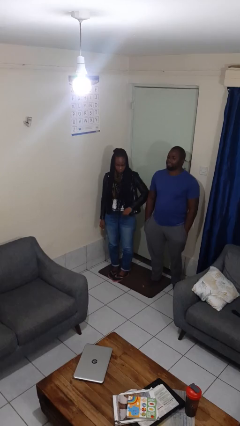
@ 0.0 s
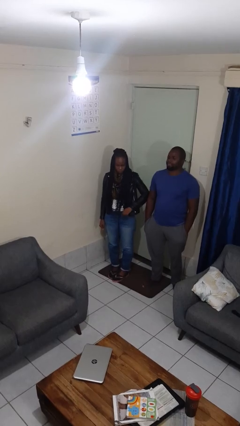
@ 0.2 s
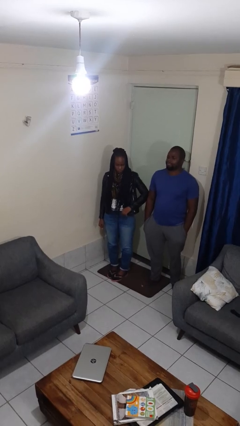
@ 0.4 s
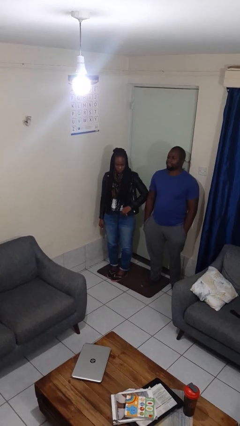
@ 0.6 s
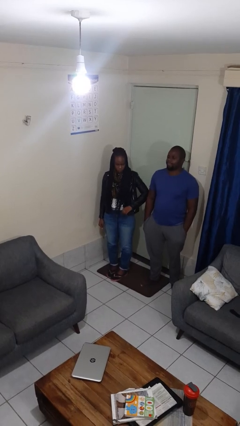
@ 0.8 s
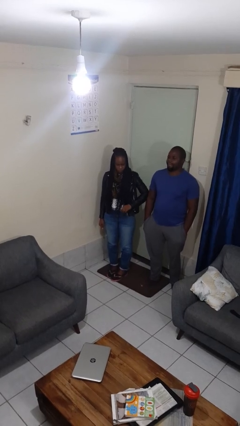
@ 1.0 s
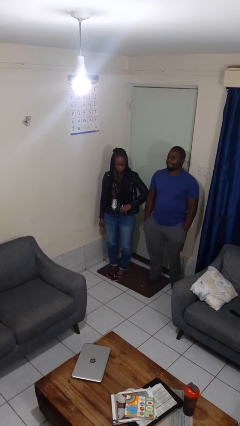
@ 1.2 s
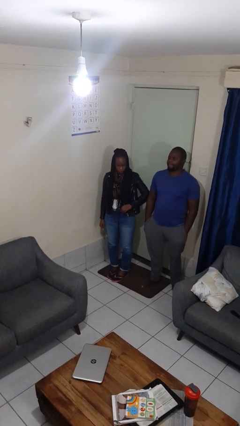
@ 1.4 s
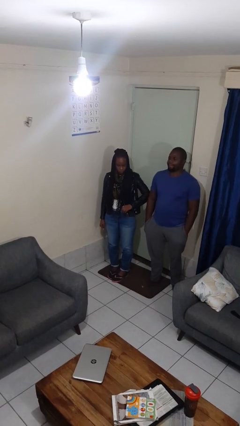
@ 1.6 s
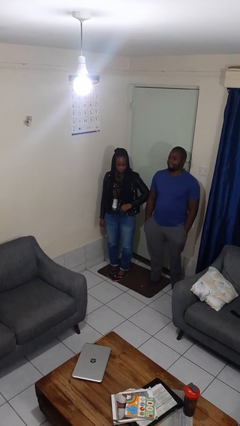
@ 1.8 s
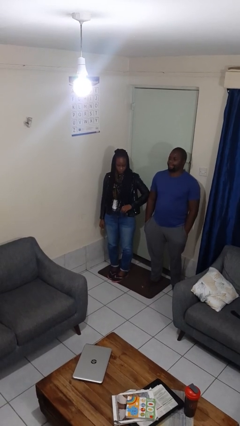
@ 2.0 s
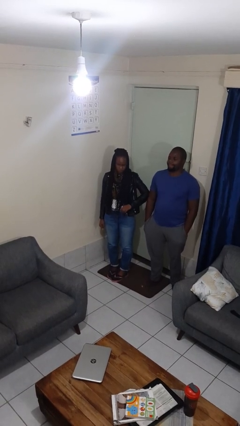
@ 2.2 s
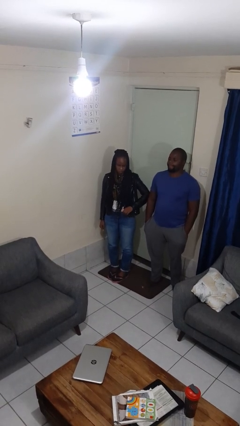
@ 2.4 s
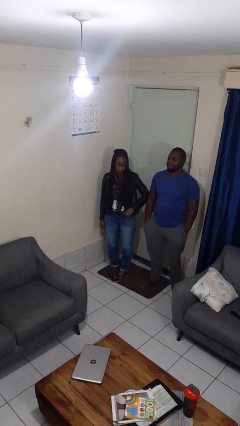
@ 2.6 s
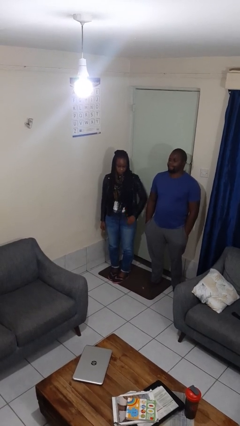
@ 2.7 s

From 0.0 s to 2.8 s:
person nudges person with elbow

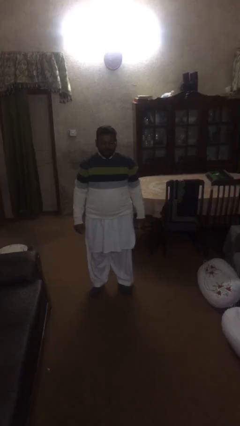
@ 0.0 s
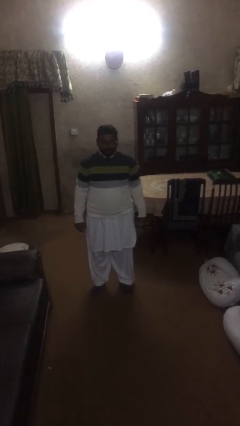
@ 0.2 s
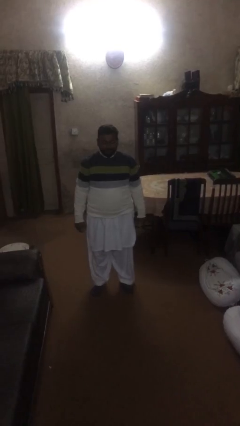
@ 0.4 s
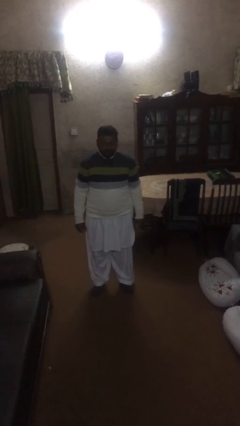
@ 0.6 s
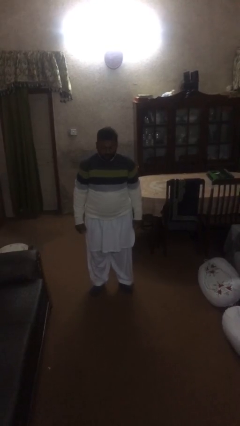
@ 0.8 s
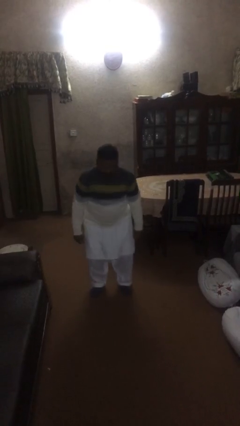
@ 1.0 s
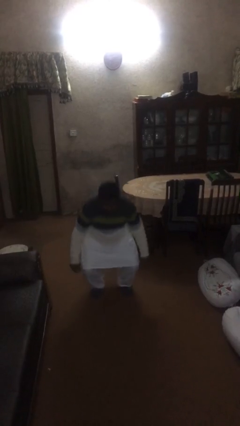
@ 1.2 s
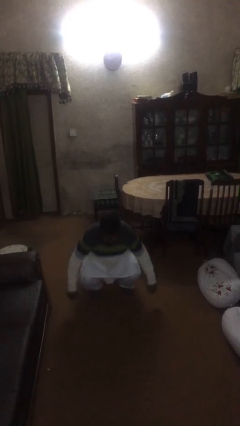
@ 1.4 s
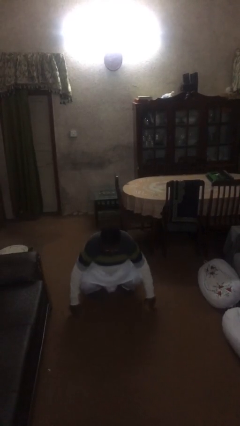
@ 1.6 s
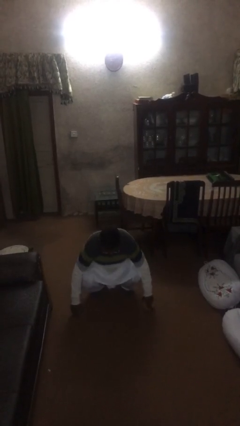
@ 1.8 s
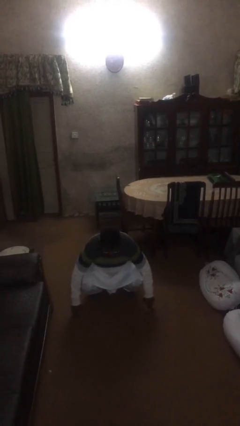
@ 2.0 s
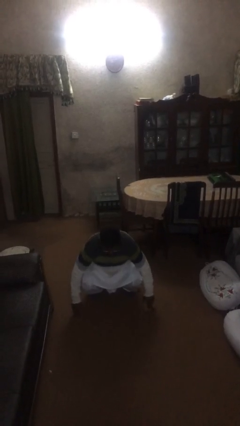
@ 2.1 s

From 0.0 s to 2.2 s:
person sits down

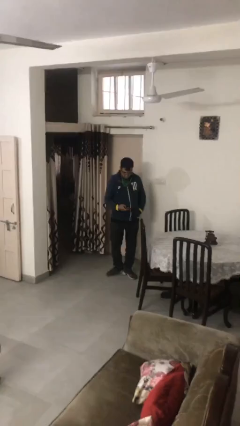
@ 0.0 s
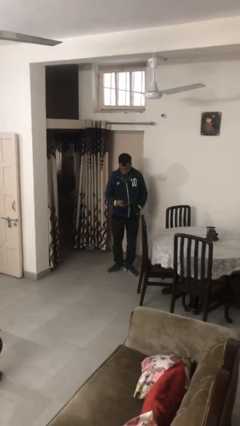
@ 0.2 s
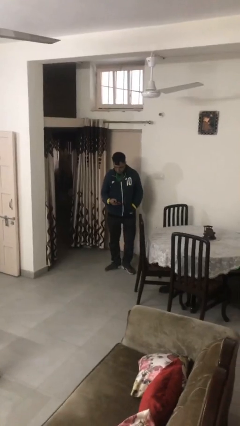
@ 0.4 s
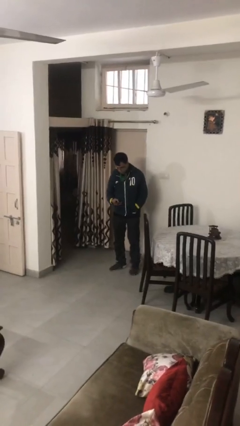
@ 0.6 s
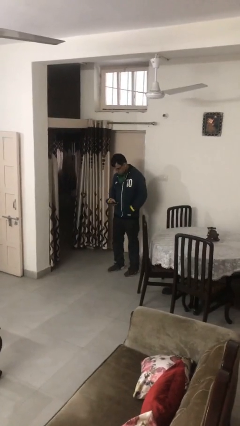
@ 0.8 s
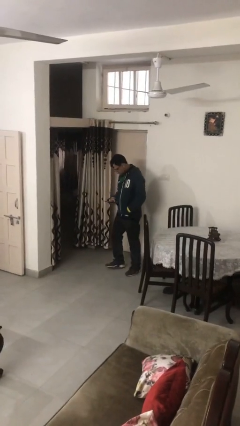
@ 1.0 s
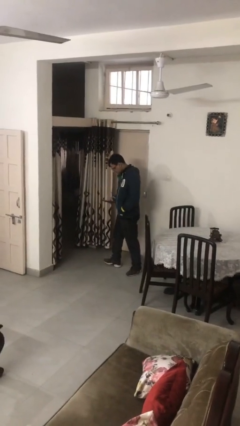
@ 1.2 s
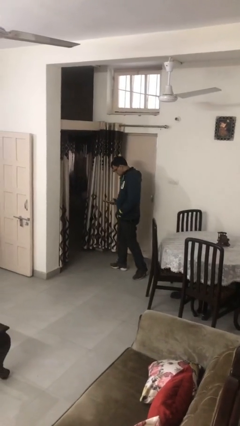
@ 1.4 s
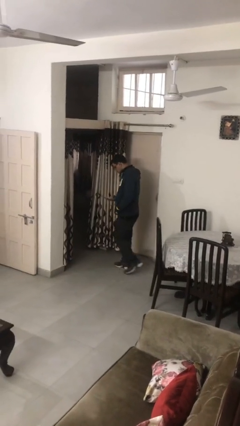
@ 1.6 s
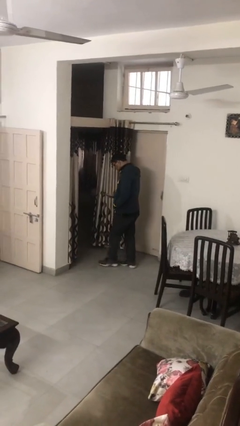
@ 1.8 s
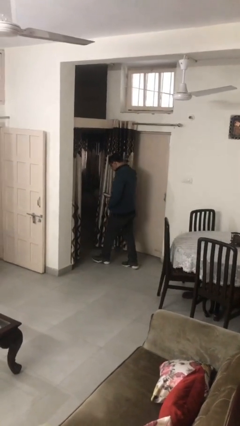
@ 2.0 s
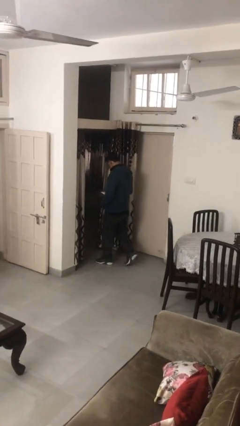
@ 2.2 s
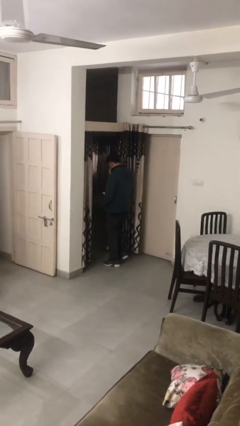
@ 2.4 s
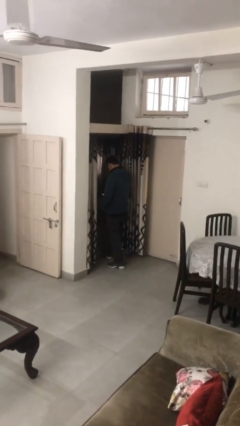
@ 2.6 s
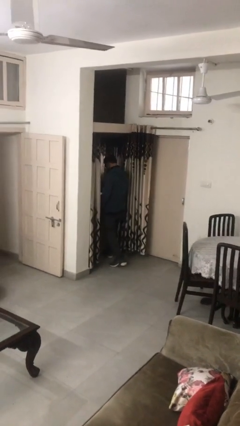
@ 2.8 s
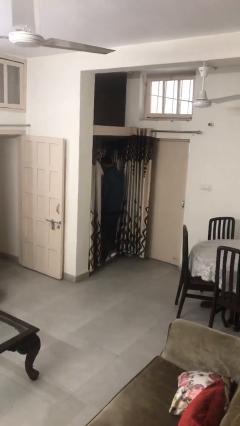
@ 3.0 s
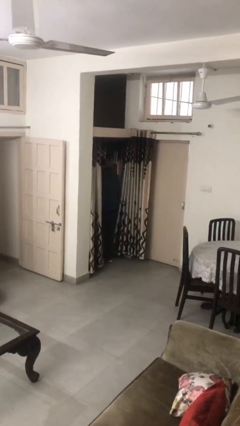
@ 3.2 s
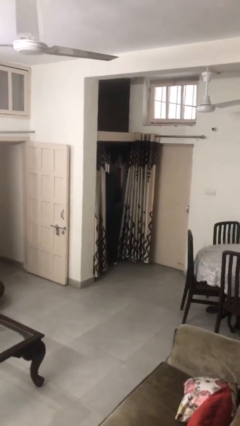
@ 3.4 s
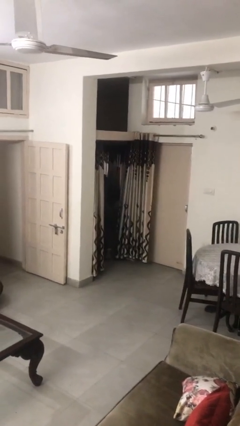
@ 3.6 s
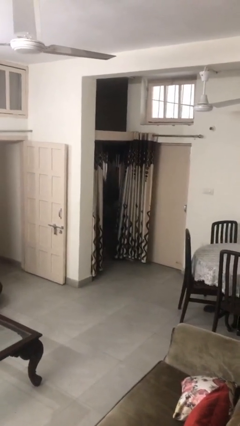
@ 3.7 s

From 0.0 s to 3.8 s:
person exits scene through structure

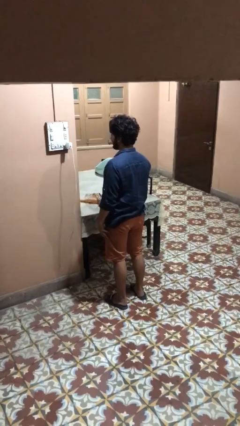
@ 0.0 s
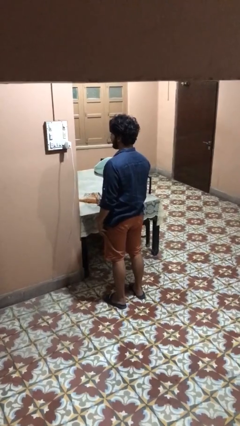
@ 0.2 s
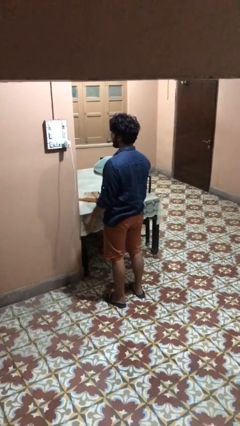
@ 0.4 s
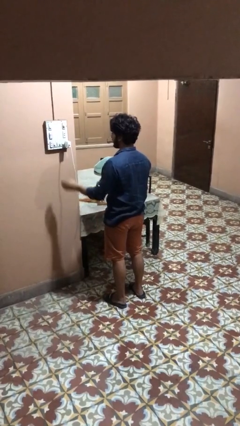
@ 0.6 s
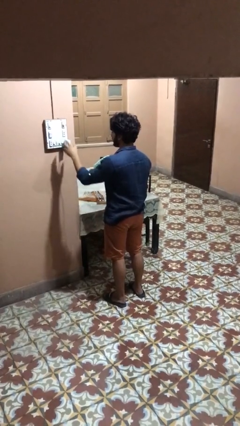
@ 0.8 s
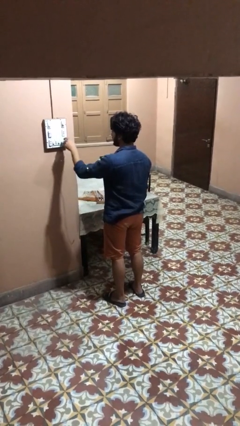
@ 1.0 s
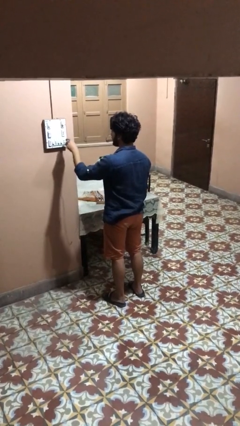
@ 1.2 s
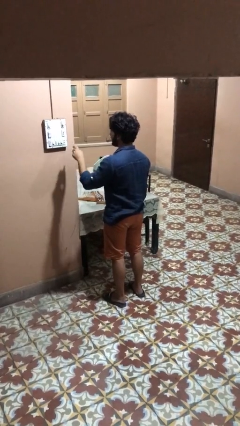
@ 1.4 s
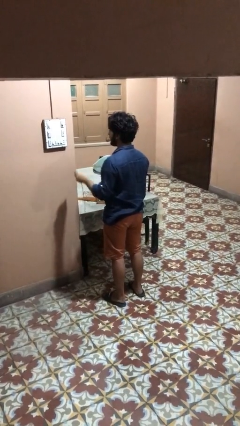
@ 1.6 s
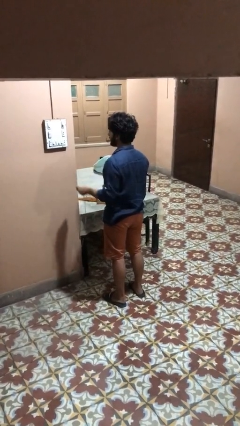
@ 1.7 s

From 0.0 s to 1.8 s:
person unplugs from electrical socket

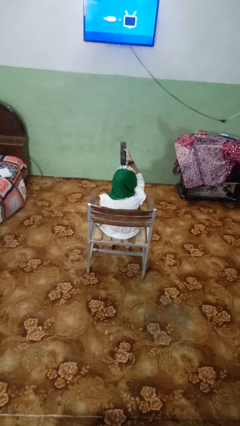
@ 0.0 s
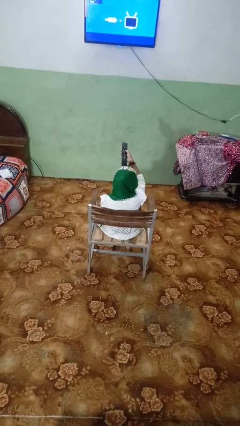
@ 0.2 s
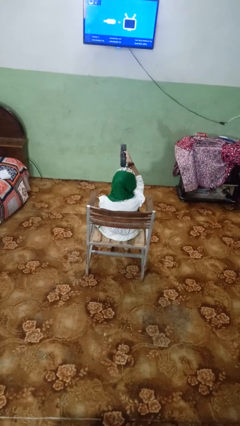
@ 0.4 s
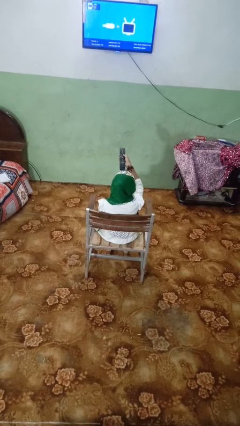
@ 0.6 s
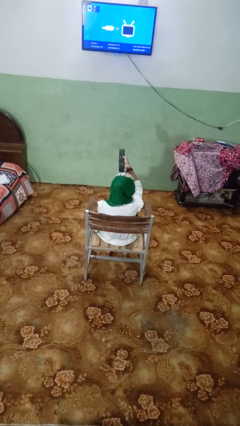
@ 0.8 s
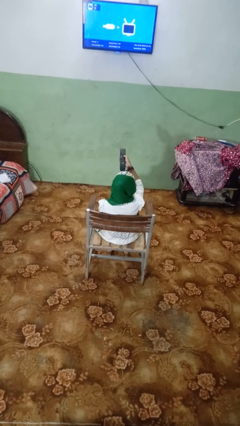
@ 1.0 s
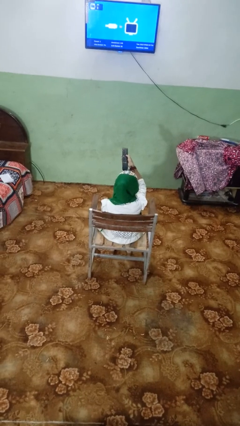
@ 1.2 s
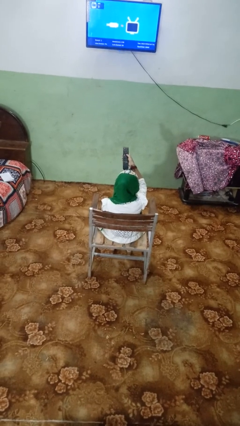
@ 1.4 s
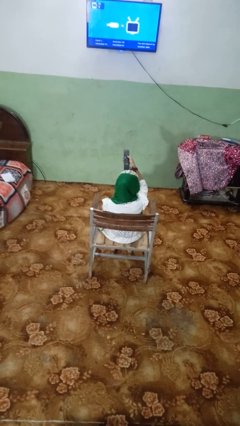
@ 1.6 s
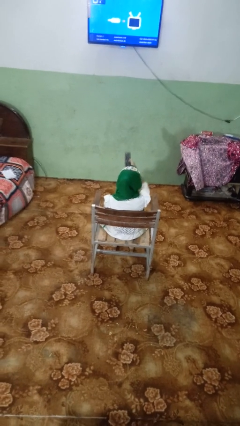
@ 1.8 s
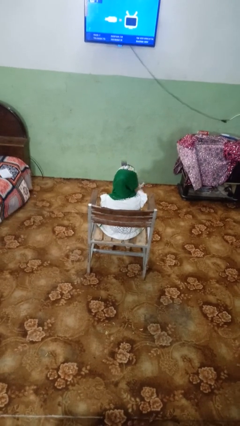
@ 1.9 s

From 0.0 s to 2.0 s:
person uses television remote

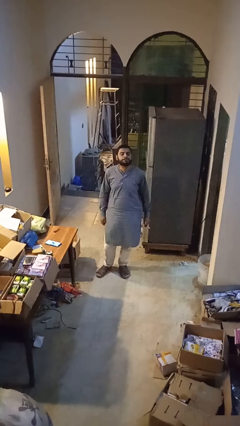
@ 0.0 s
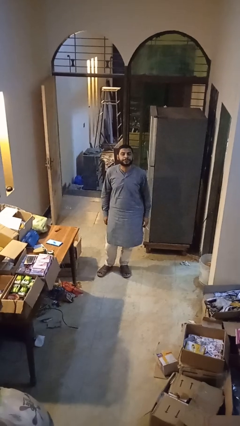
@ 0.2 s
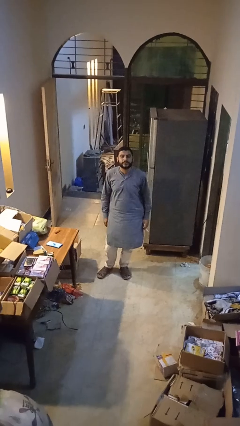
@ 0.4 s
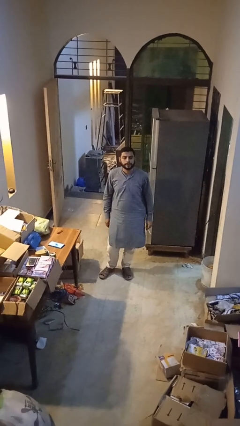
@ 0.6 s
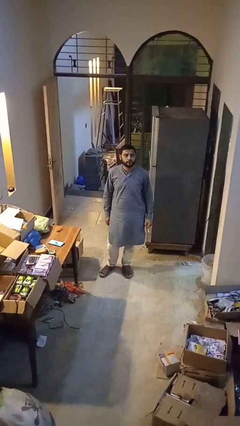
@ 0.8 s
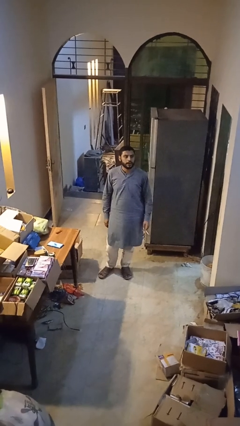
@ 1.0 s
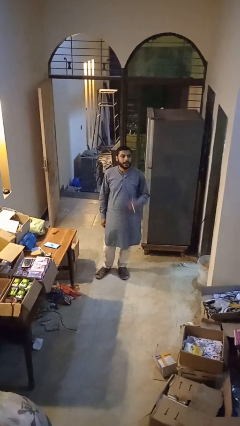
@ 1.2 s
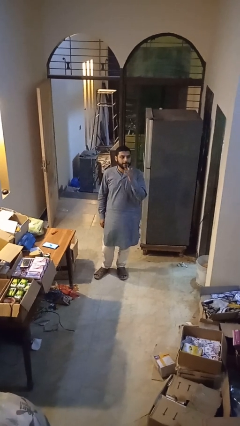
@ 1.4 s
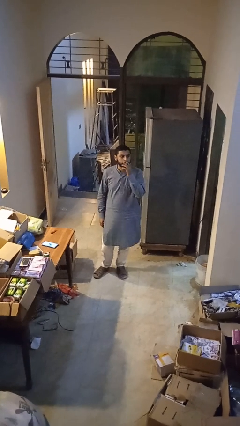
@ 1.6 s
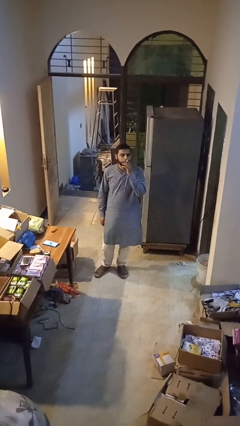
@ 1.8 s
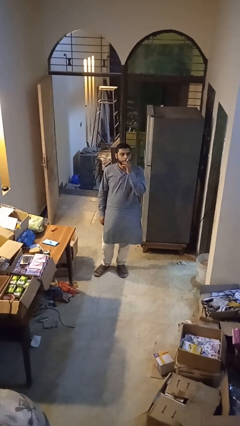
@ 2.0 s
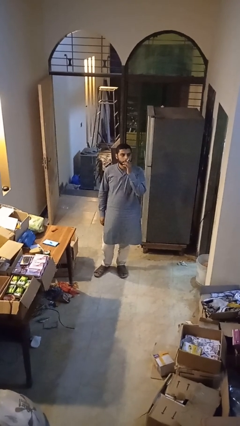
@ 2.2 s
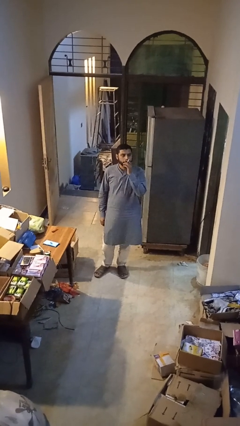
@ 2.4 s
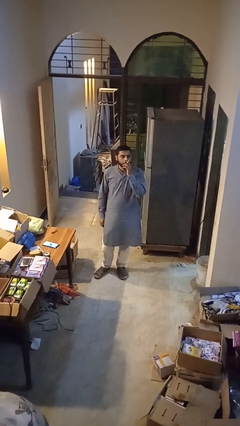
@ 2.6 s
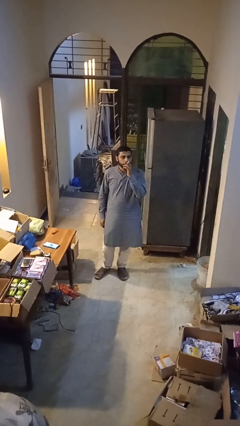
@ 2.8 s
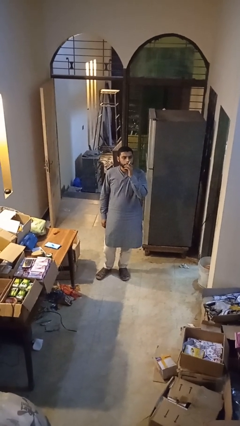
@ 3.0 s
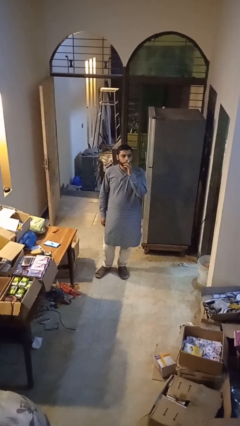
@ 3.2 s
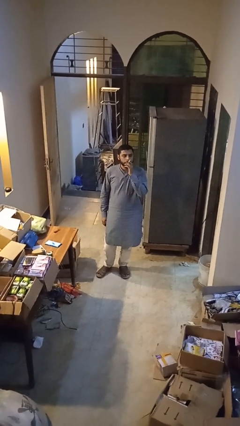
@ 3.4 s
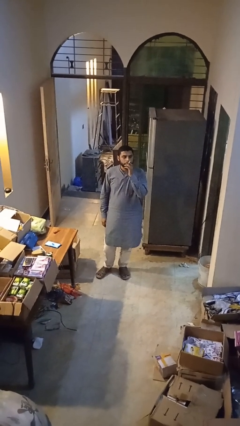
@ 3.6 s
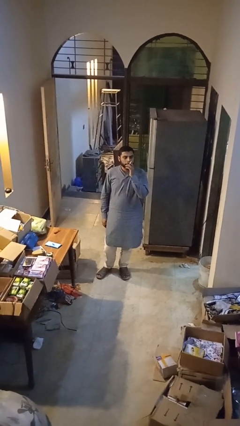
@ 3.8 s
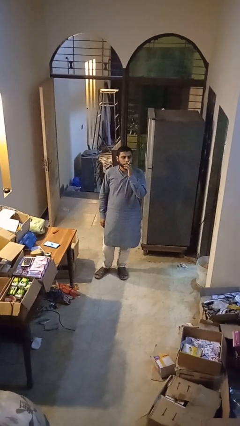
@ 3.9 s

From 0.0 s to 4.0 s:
person vapes

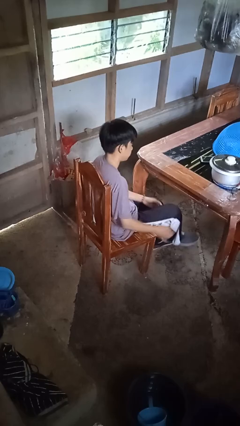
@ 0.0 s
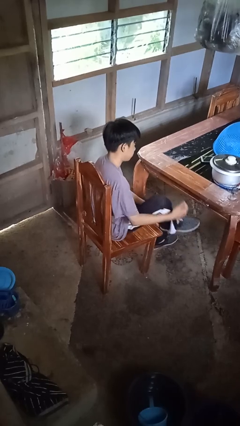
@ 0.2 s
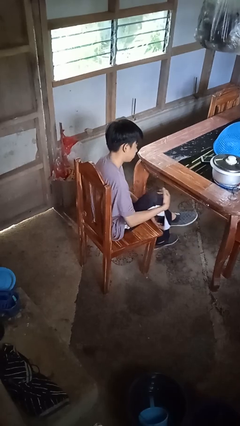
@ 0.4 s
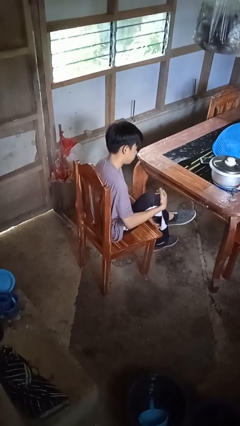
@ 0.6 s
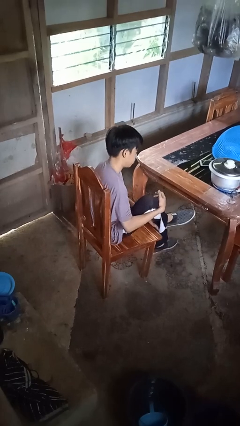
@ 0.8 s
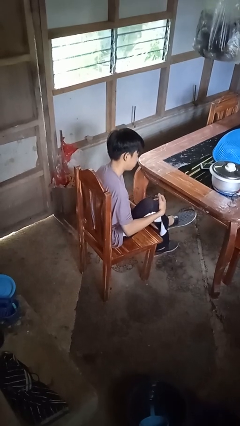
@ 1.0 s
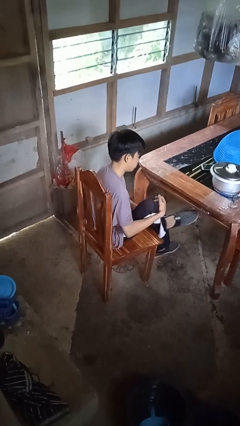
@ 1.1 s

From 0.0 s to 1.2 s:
person takes off shoes
